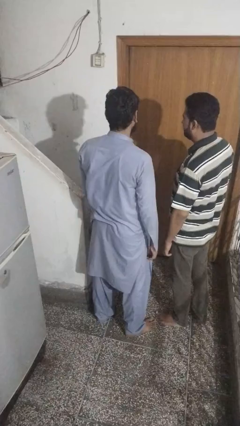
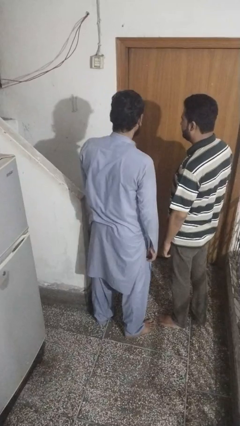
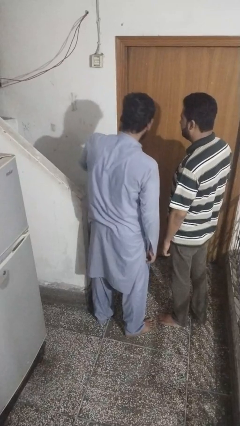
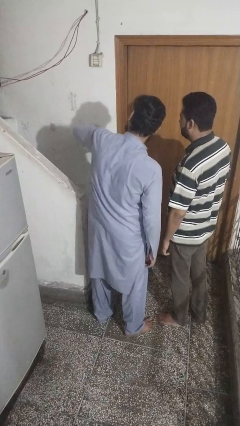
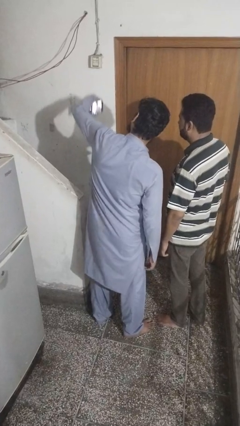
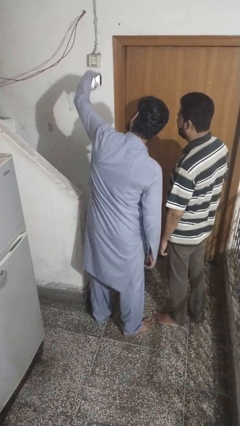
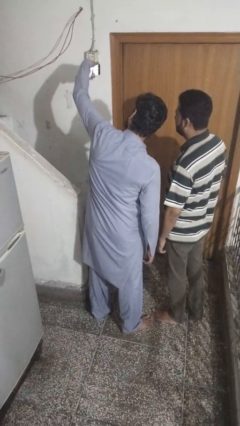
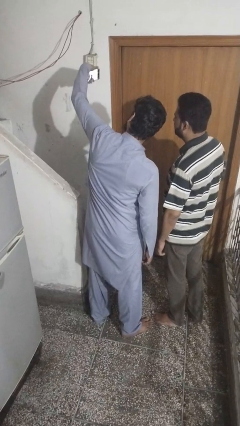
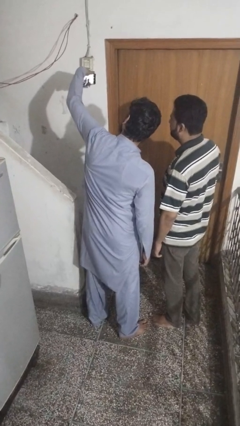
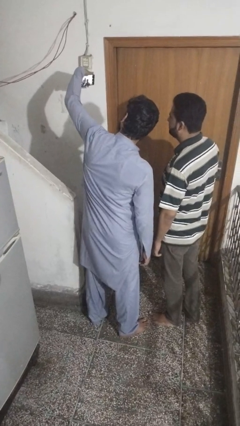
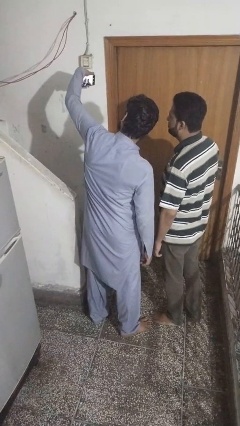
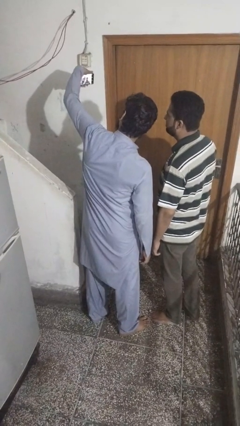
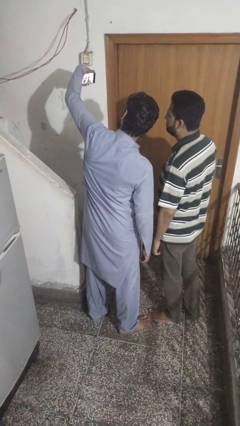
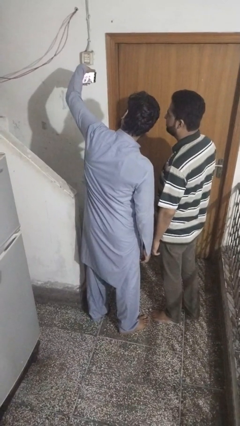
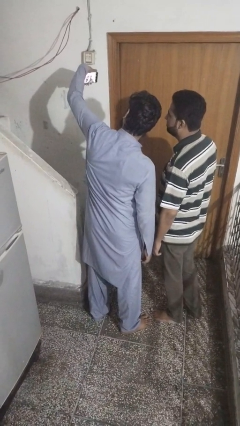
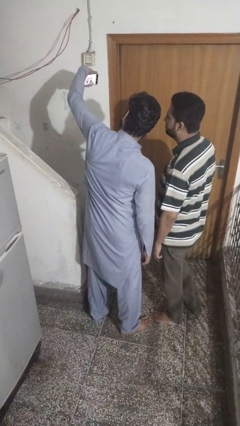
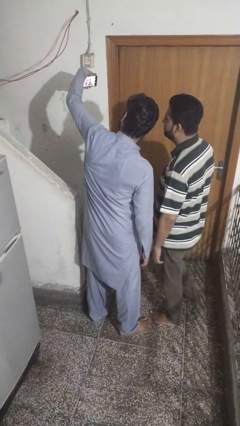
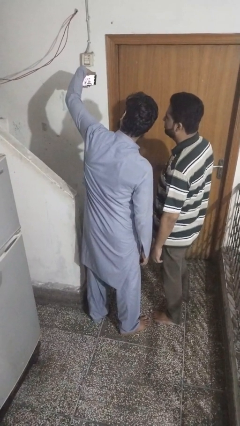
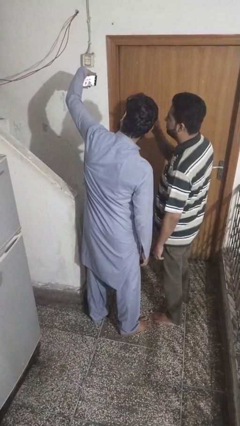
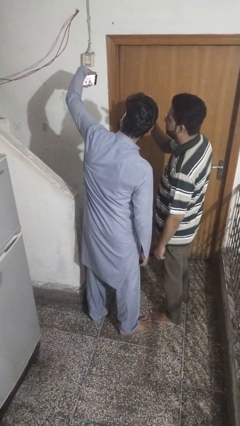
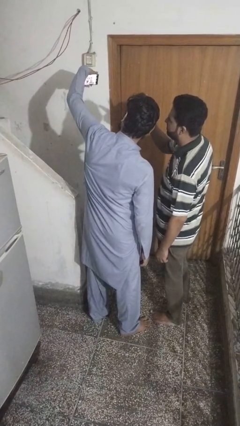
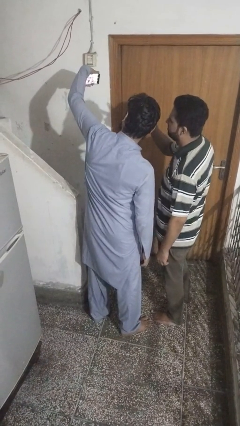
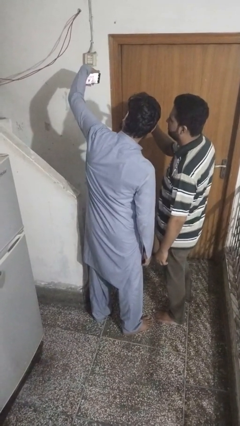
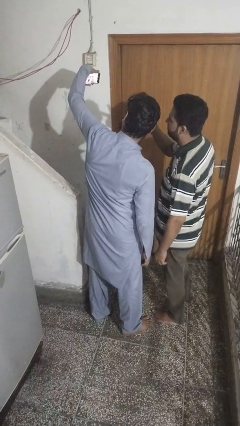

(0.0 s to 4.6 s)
person takes selfie with person

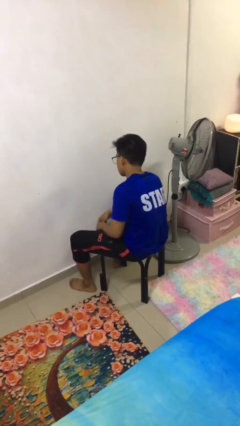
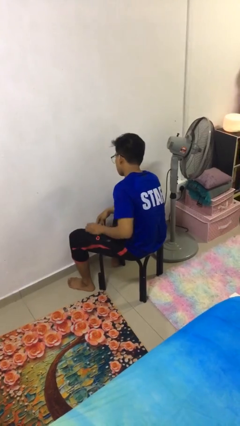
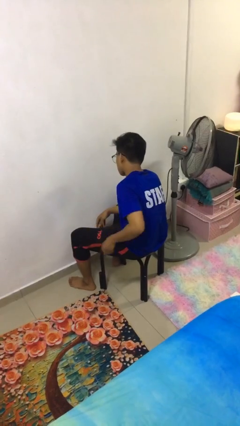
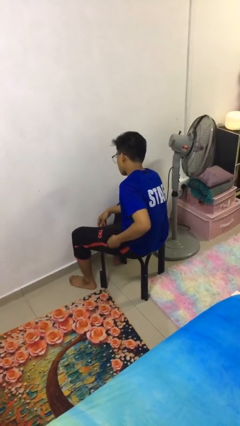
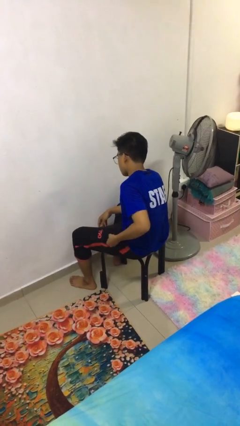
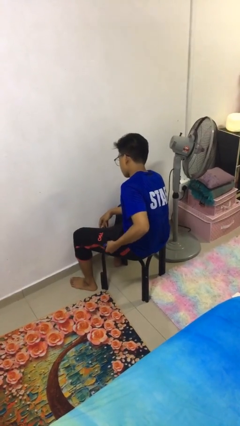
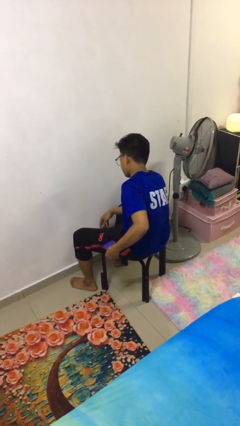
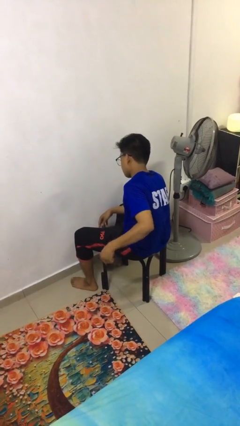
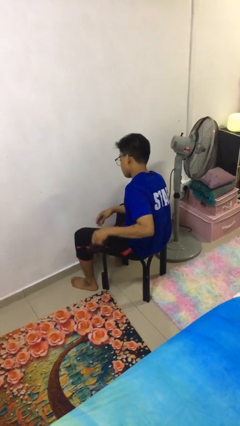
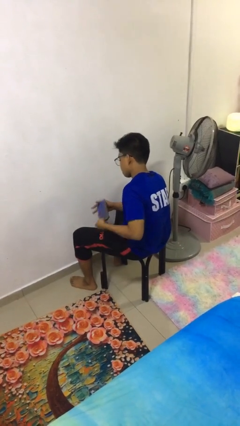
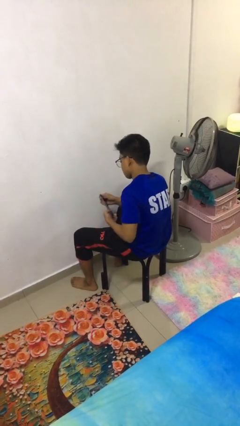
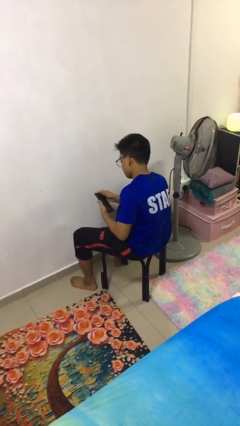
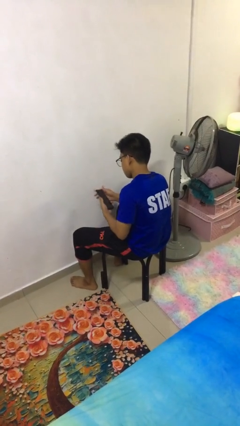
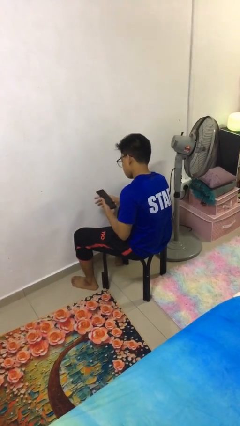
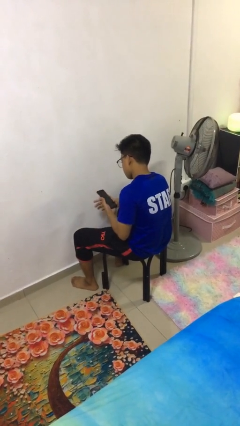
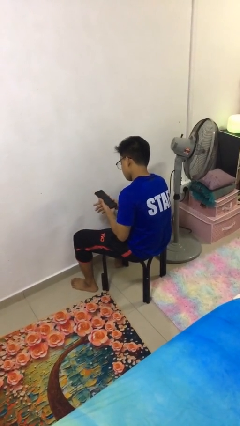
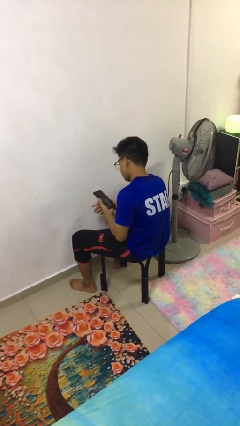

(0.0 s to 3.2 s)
person takes phone from pocket

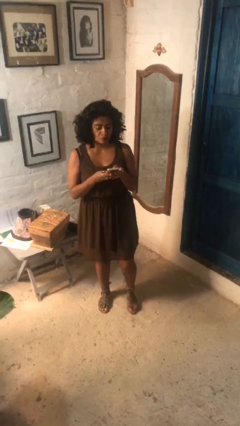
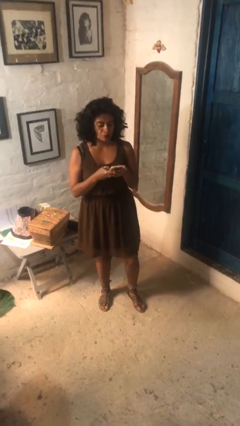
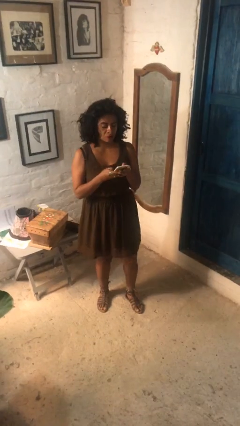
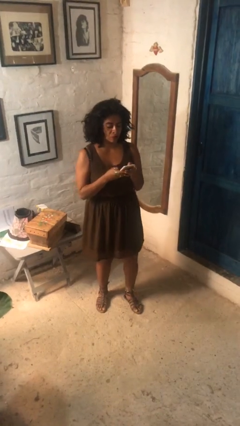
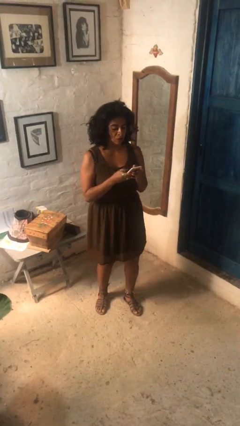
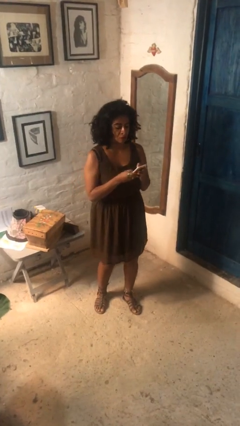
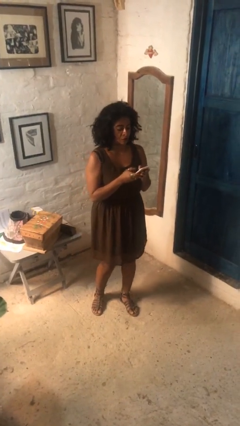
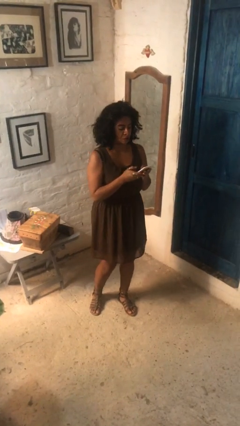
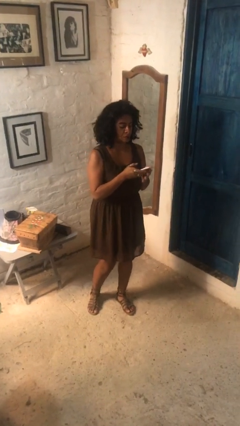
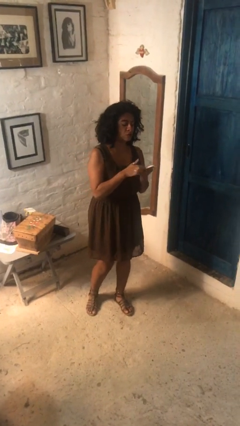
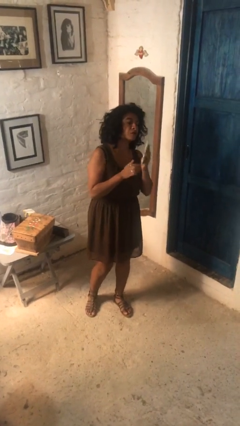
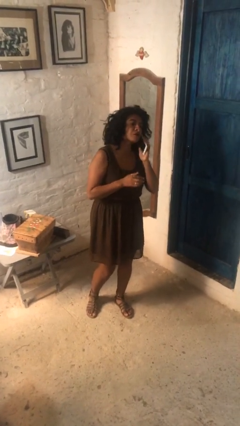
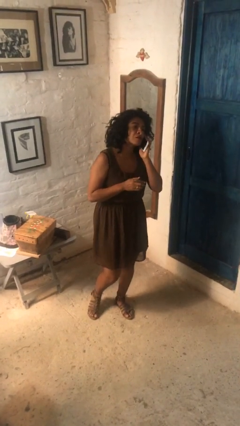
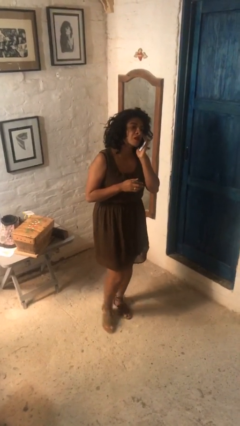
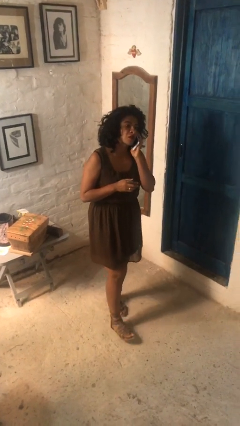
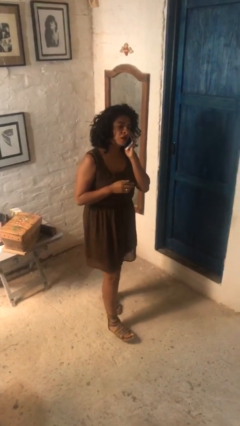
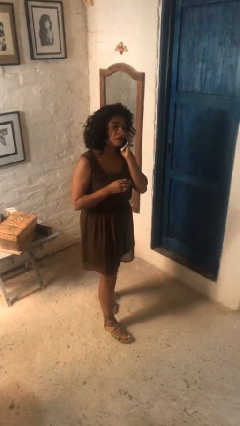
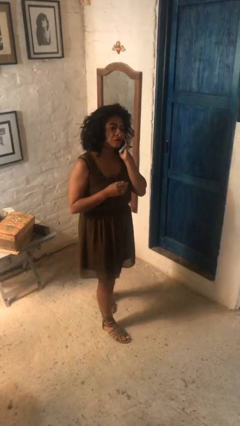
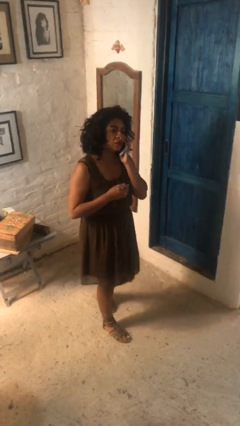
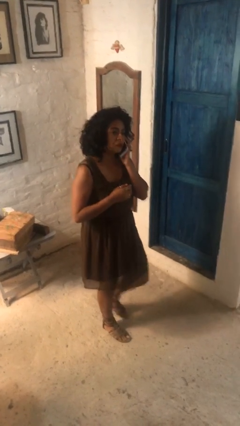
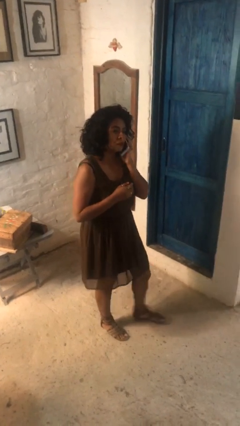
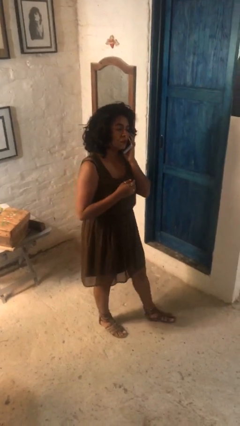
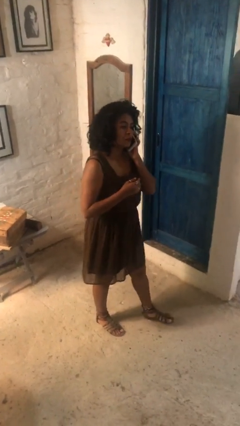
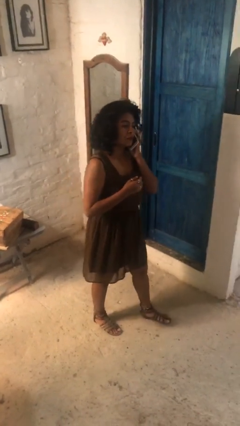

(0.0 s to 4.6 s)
person talks on phone

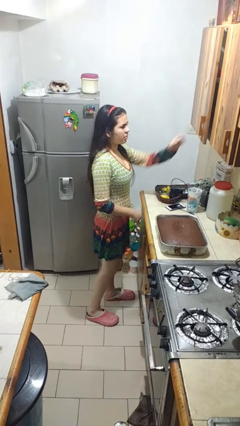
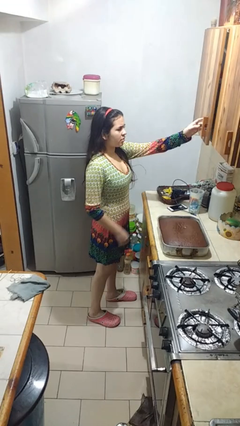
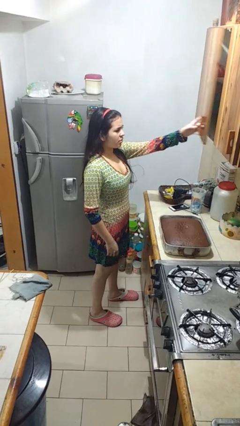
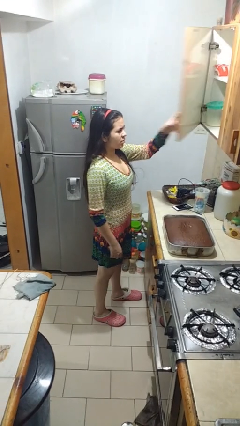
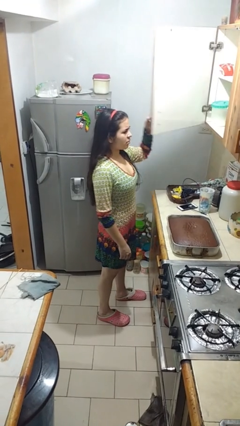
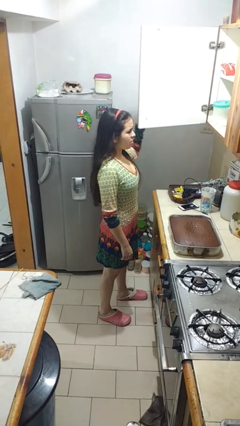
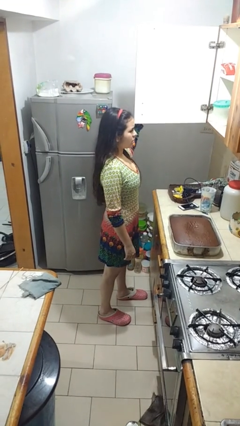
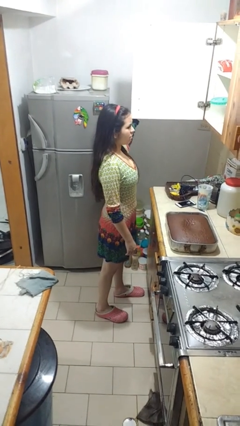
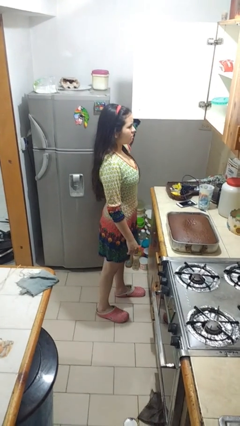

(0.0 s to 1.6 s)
person opens cabinet

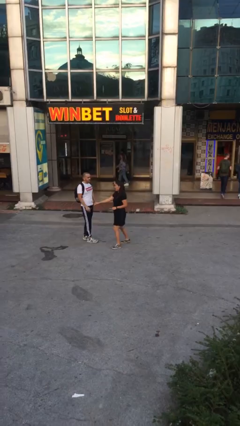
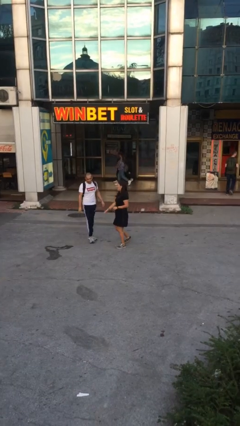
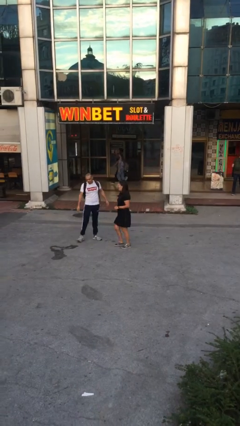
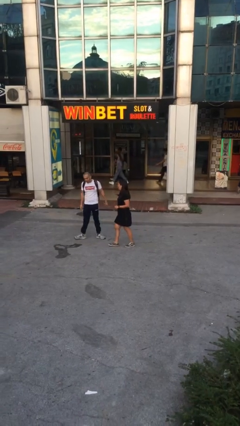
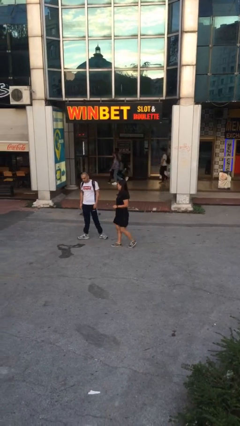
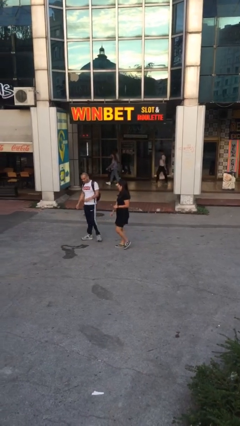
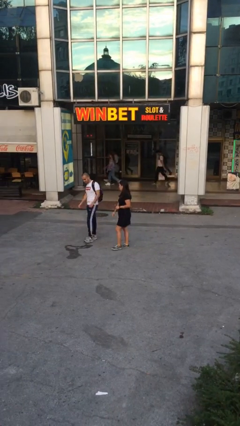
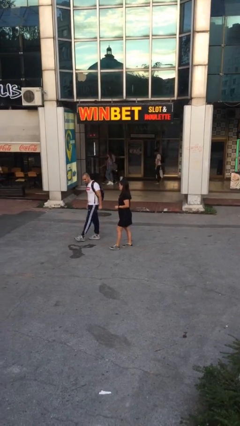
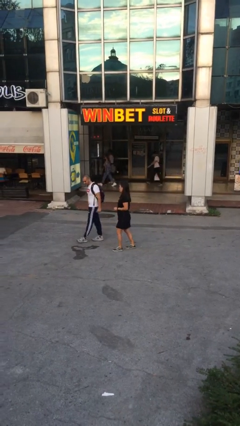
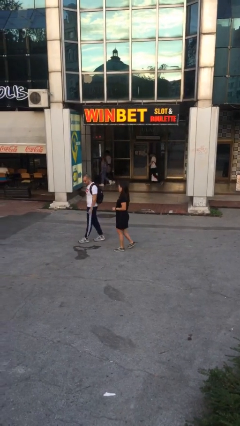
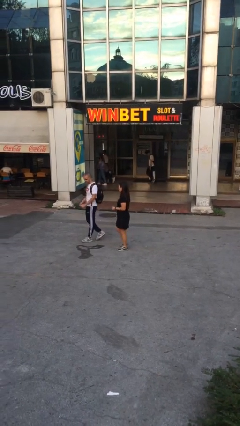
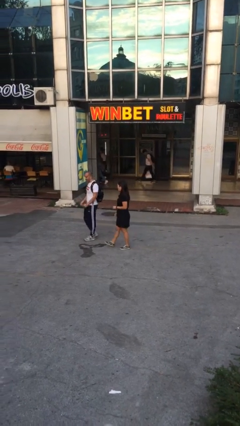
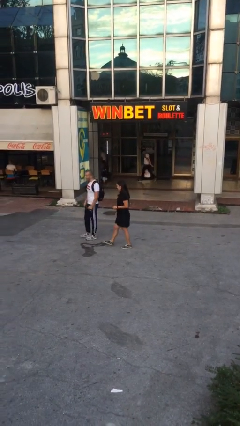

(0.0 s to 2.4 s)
person talks to person

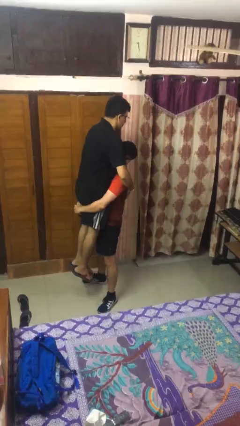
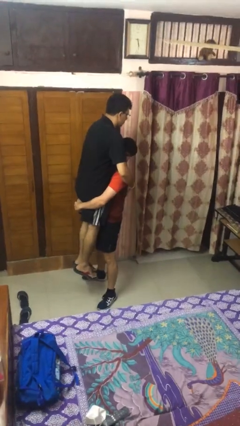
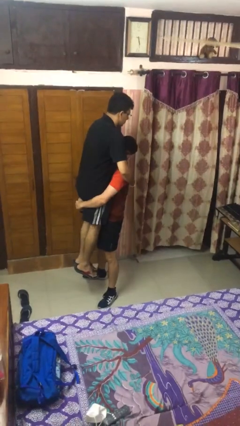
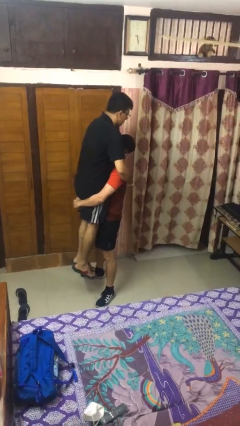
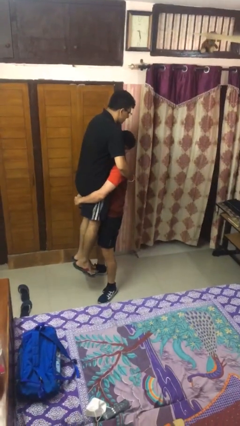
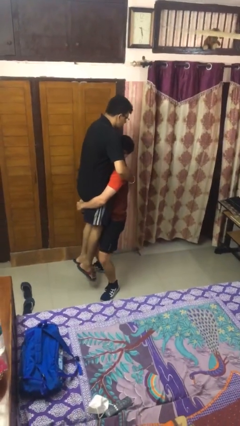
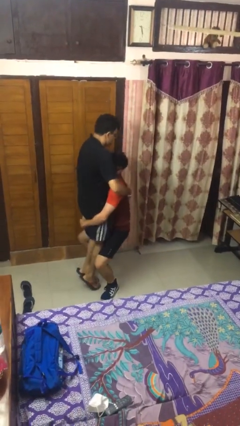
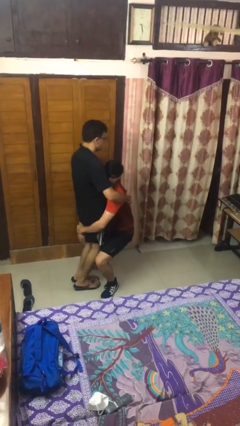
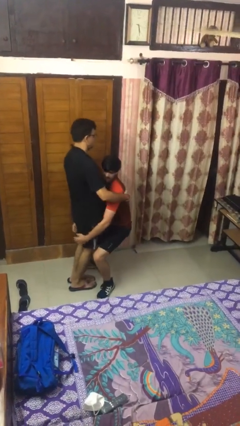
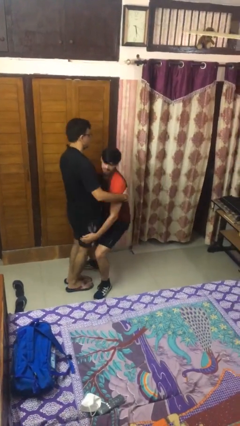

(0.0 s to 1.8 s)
person puts down person
